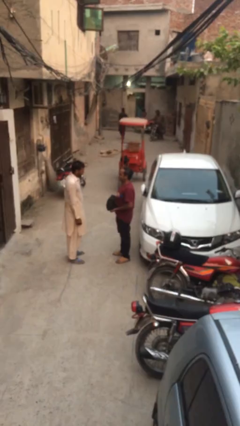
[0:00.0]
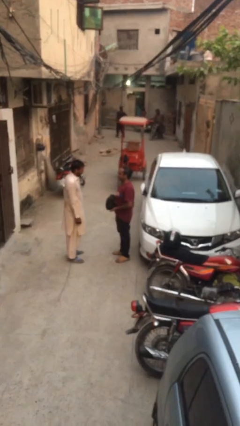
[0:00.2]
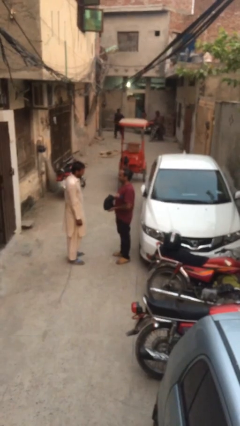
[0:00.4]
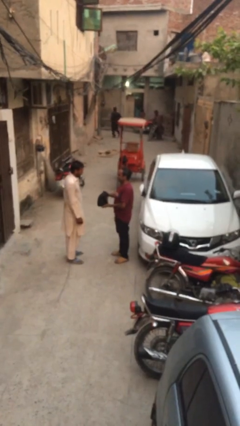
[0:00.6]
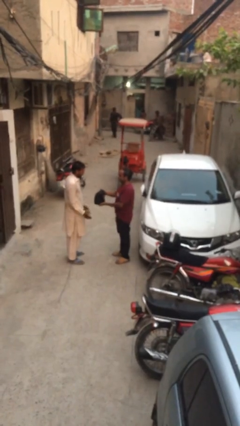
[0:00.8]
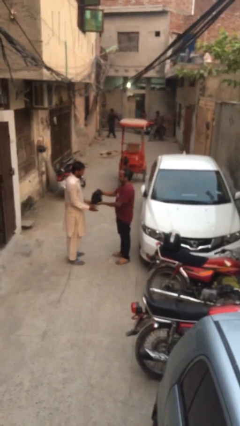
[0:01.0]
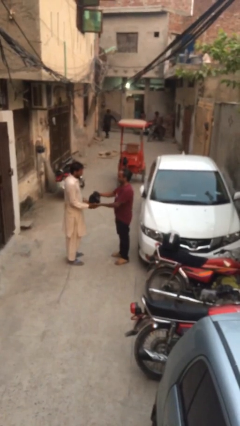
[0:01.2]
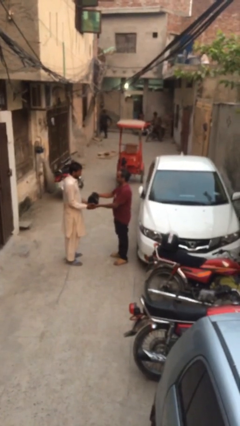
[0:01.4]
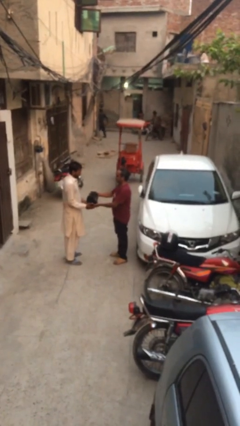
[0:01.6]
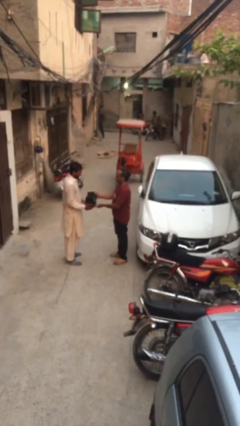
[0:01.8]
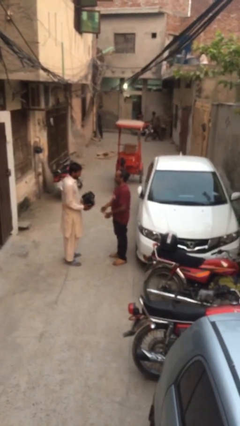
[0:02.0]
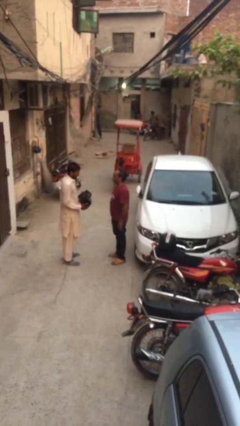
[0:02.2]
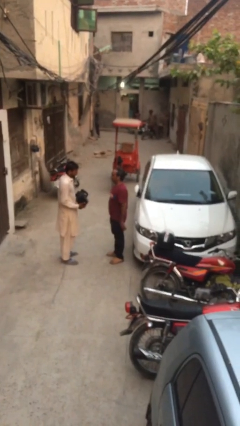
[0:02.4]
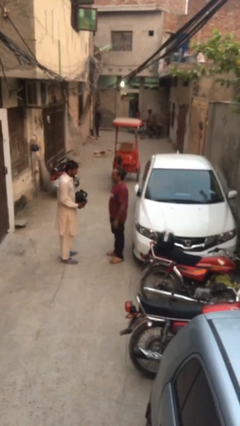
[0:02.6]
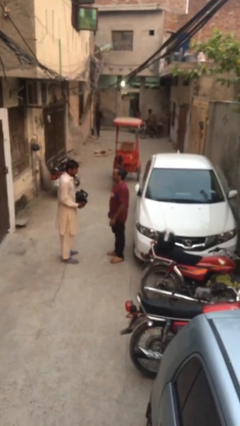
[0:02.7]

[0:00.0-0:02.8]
person transfers object to person

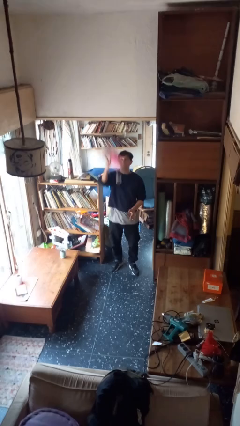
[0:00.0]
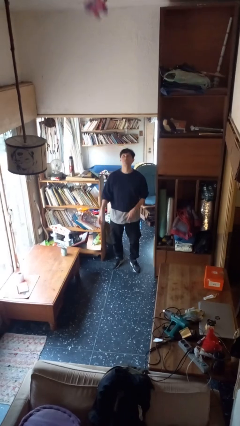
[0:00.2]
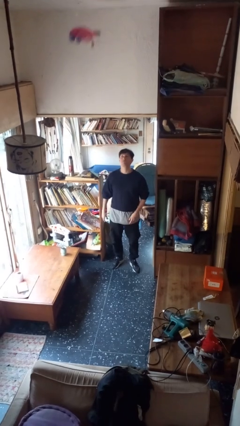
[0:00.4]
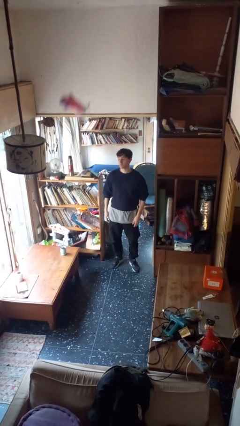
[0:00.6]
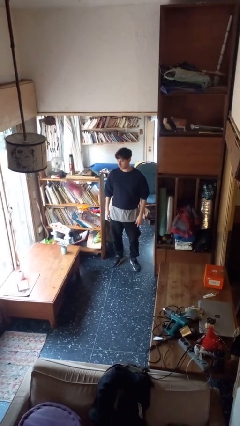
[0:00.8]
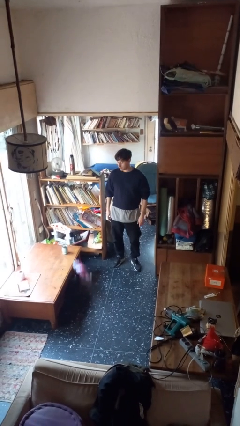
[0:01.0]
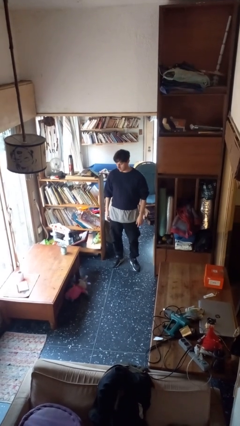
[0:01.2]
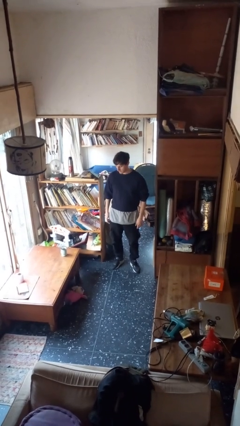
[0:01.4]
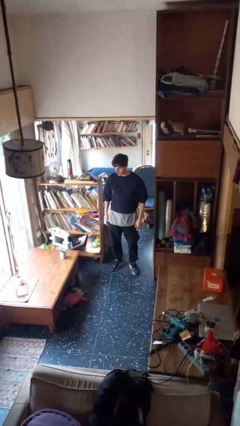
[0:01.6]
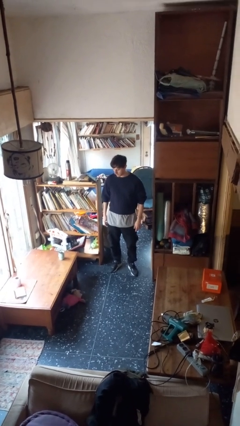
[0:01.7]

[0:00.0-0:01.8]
person throws object into air

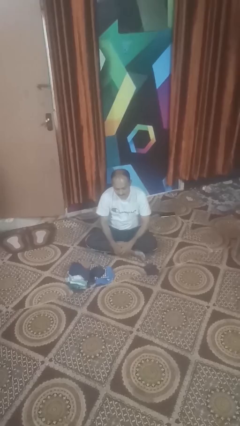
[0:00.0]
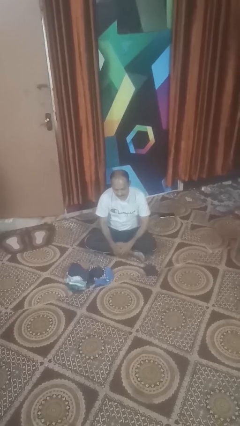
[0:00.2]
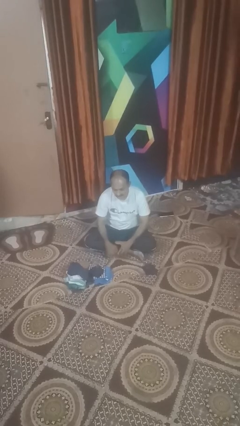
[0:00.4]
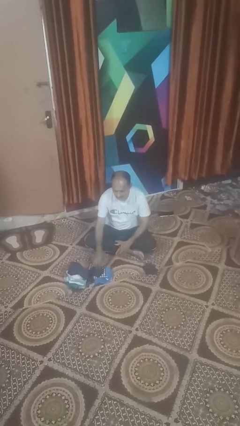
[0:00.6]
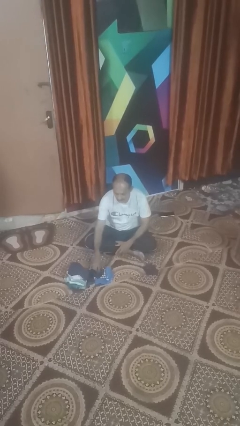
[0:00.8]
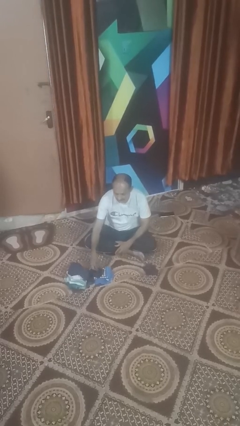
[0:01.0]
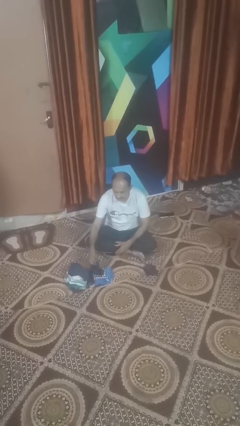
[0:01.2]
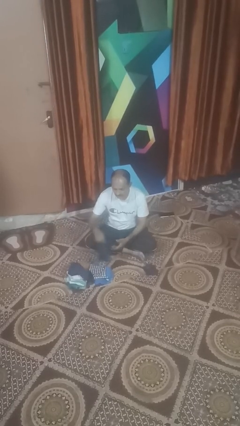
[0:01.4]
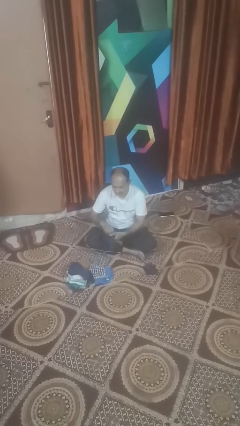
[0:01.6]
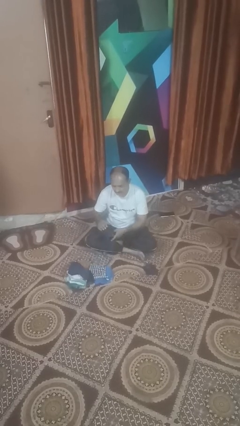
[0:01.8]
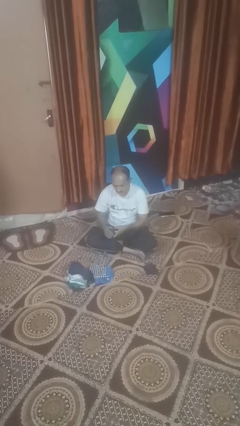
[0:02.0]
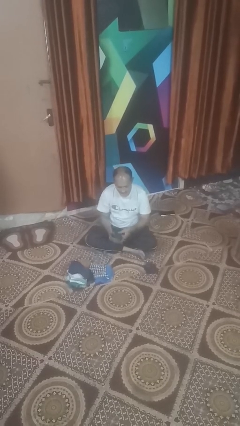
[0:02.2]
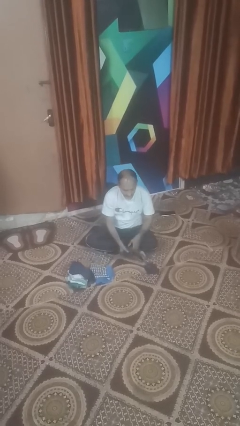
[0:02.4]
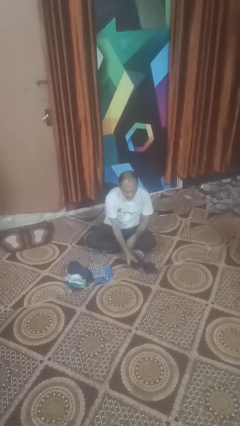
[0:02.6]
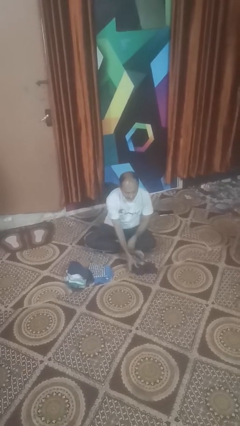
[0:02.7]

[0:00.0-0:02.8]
person folds socks

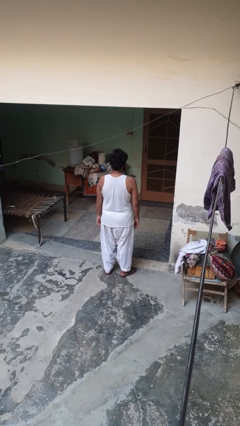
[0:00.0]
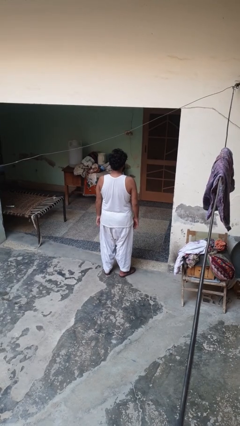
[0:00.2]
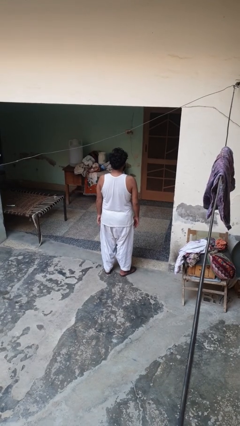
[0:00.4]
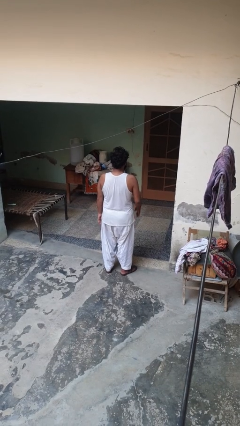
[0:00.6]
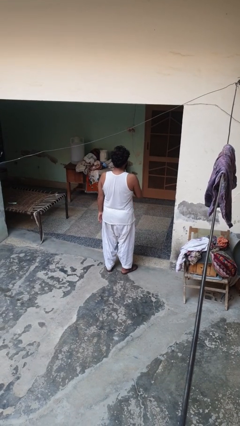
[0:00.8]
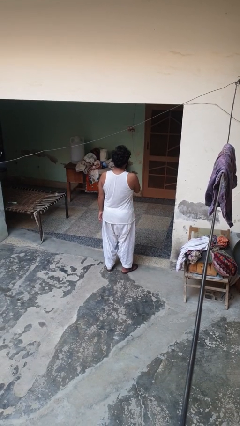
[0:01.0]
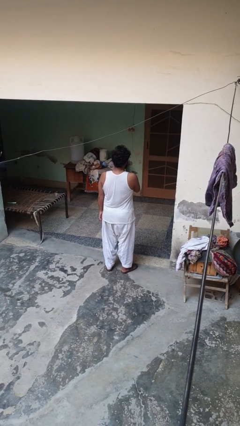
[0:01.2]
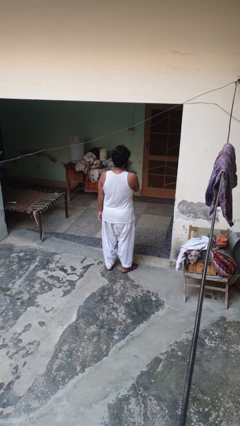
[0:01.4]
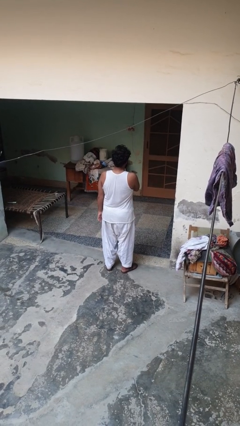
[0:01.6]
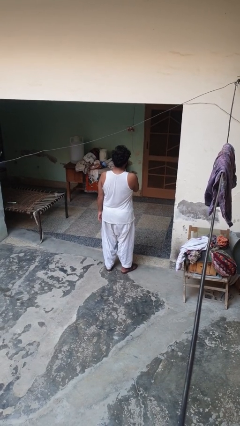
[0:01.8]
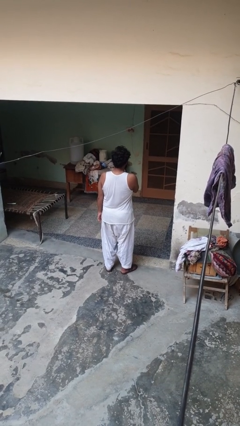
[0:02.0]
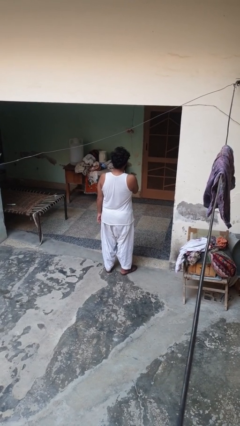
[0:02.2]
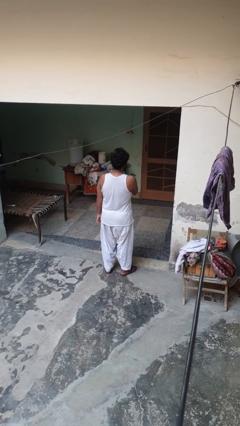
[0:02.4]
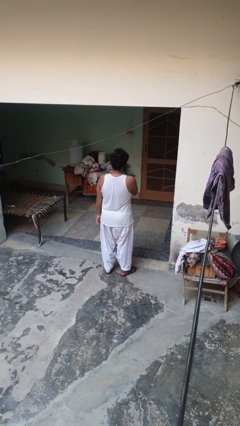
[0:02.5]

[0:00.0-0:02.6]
person drums on chest

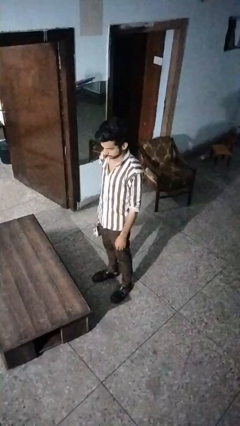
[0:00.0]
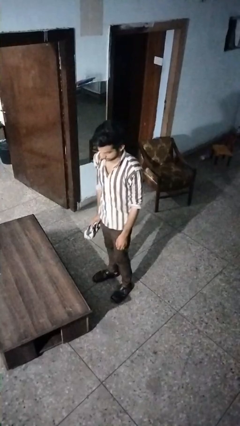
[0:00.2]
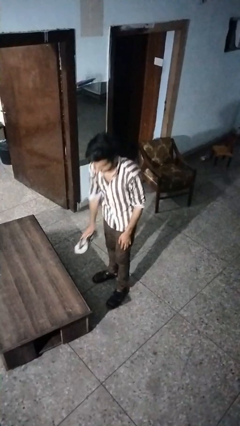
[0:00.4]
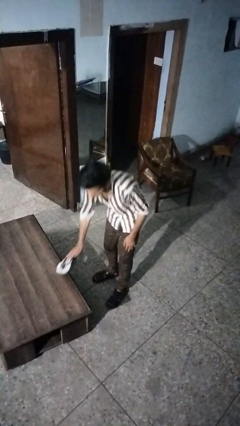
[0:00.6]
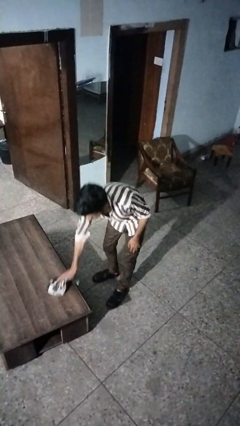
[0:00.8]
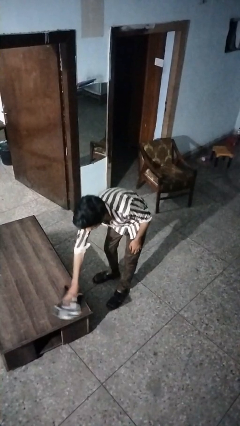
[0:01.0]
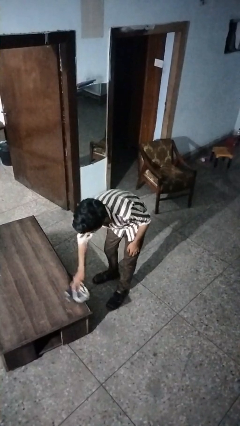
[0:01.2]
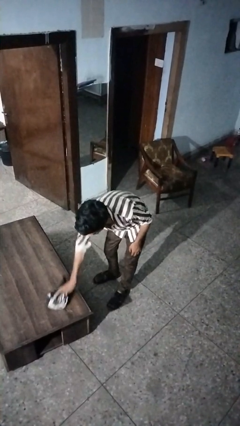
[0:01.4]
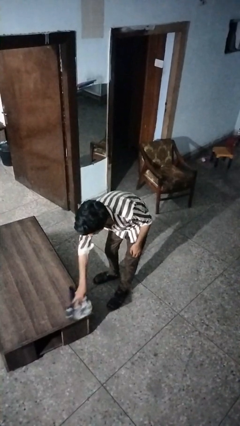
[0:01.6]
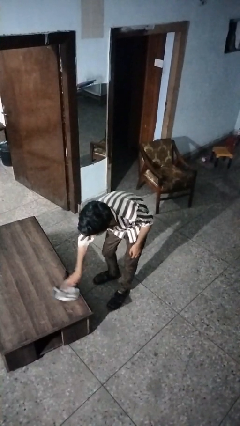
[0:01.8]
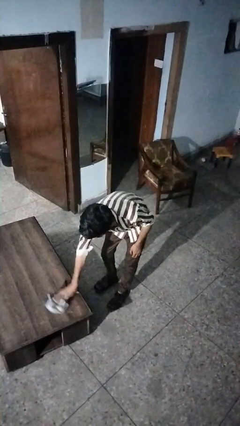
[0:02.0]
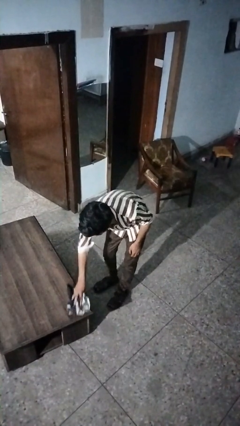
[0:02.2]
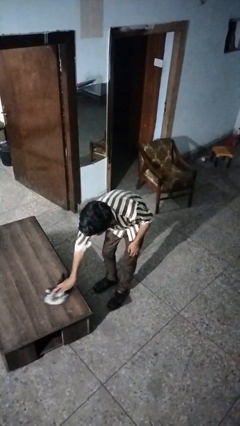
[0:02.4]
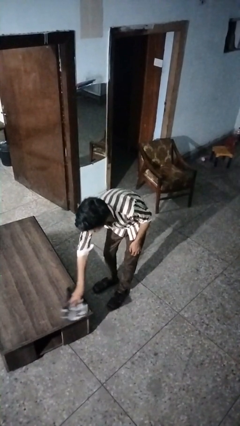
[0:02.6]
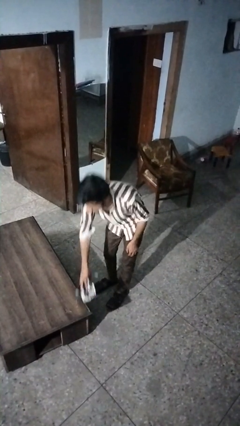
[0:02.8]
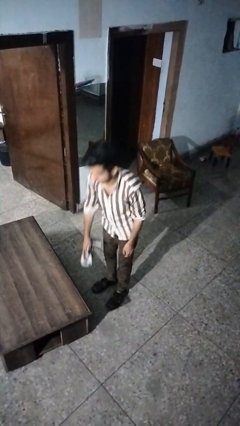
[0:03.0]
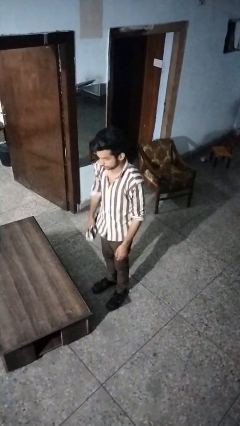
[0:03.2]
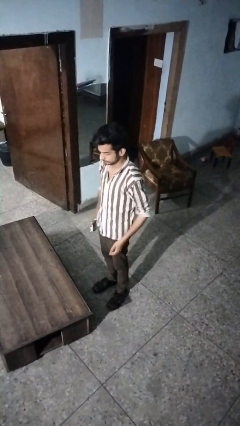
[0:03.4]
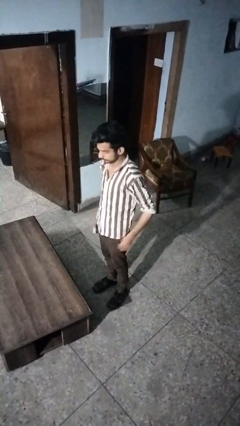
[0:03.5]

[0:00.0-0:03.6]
person cleans table with rag

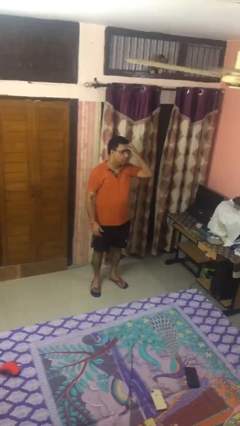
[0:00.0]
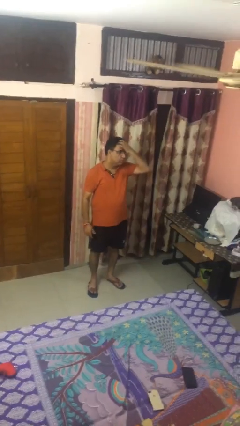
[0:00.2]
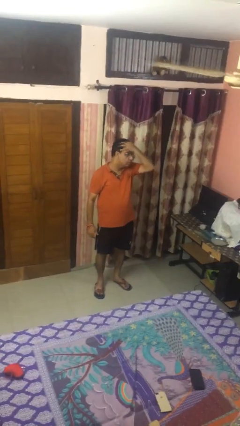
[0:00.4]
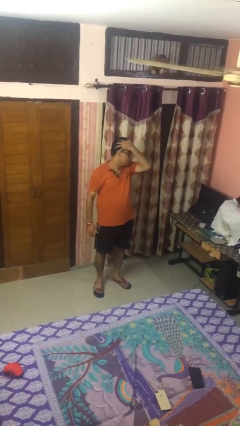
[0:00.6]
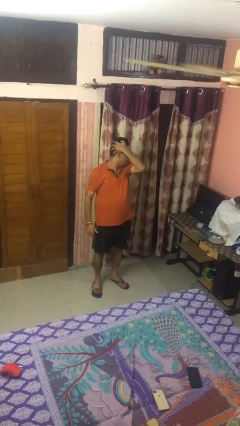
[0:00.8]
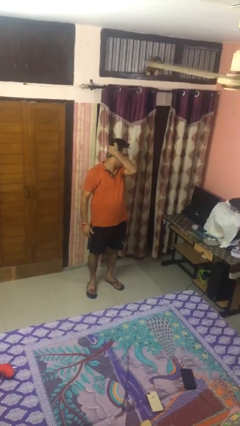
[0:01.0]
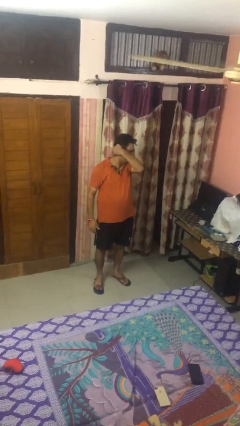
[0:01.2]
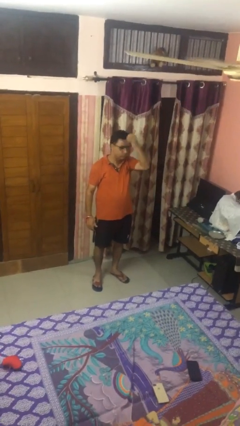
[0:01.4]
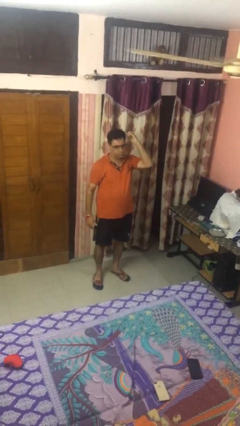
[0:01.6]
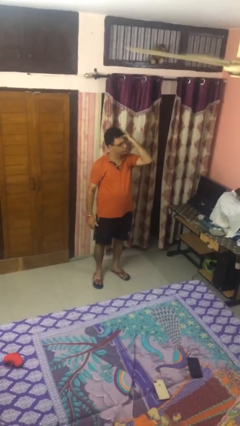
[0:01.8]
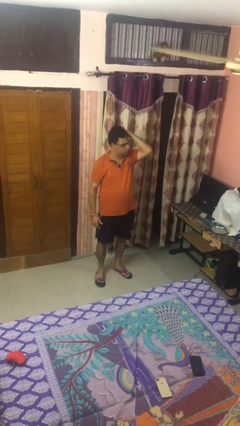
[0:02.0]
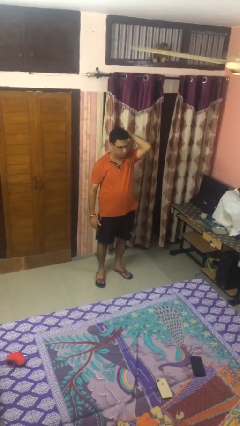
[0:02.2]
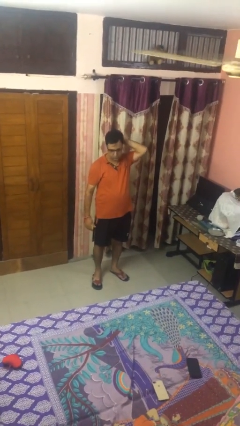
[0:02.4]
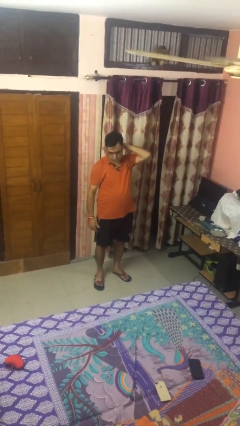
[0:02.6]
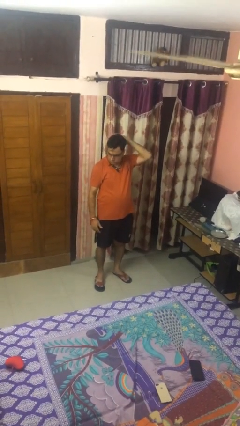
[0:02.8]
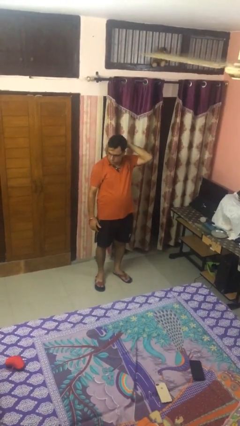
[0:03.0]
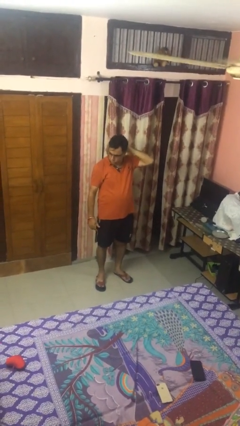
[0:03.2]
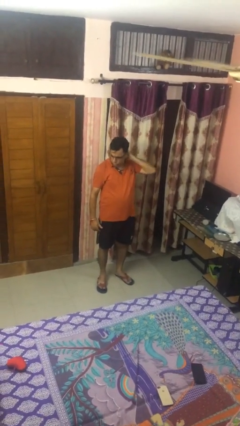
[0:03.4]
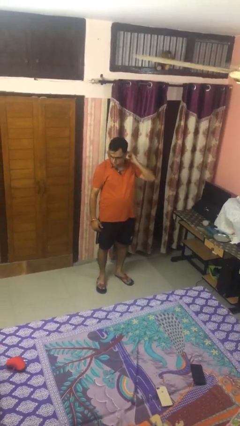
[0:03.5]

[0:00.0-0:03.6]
person strokes hair
